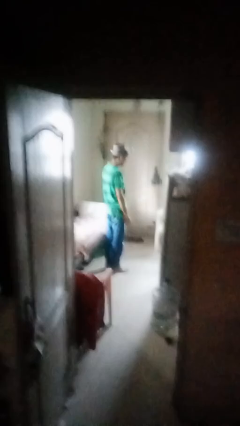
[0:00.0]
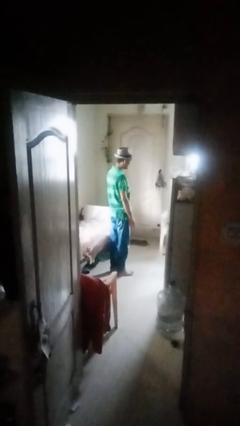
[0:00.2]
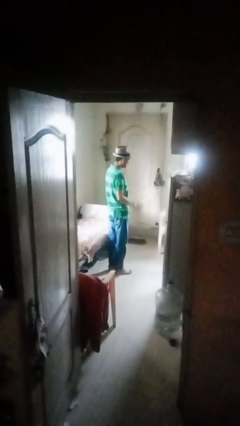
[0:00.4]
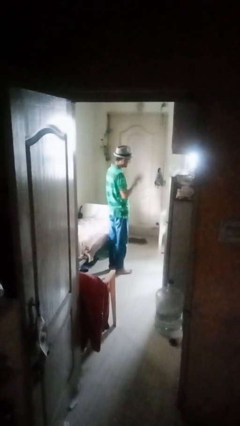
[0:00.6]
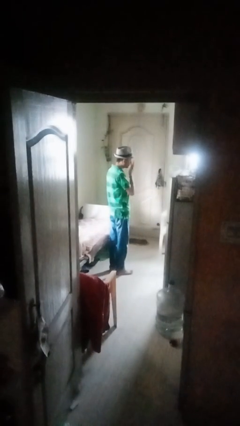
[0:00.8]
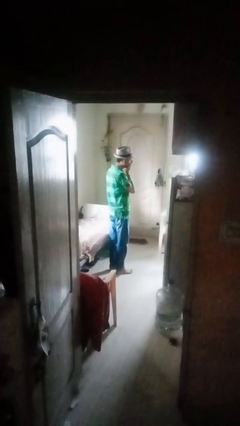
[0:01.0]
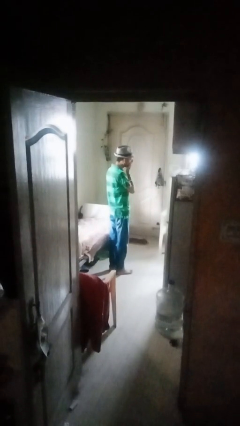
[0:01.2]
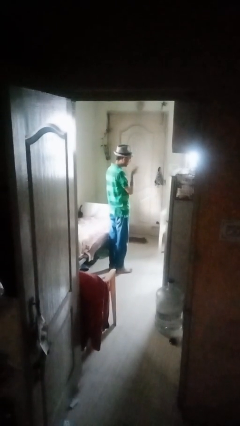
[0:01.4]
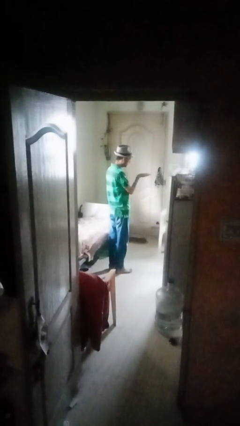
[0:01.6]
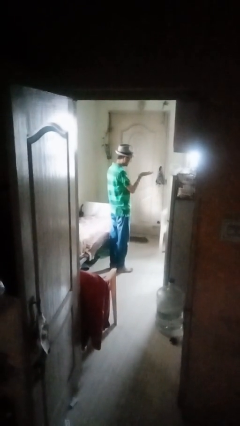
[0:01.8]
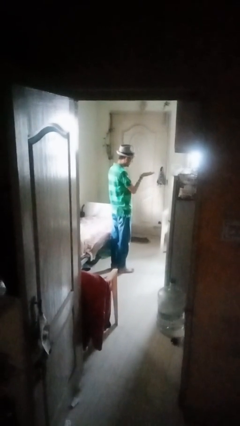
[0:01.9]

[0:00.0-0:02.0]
person gestures blow kiss

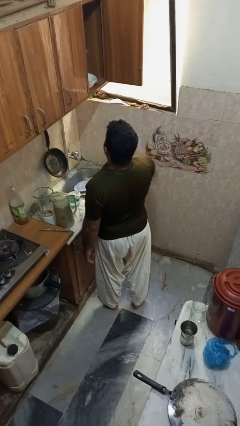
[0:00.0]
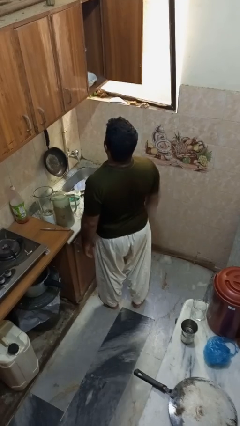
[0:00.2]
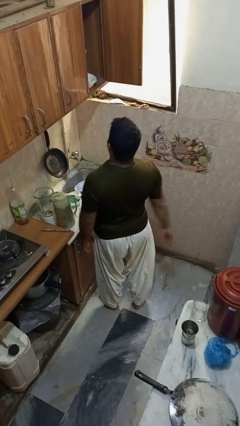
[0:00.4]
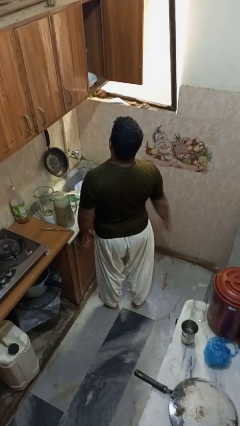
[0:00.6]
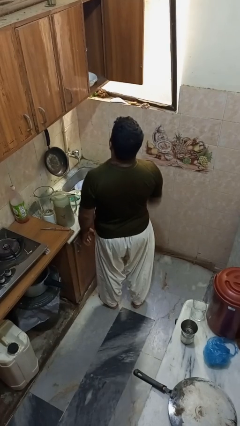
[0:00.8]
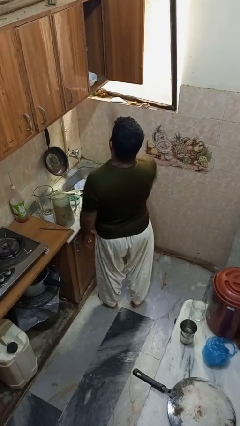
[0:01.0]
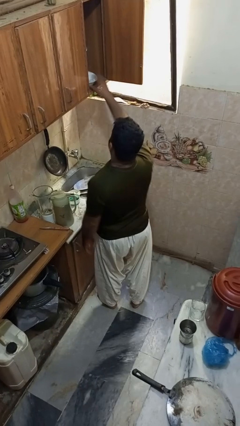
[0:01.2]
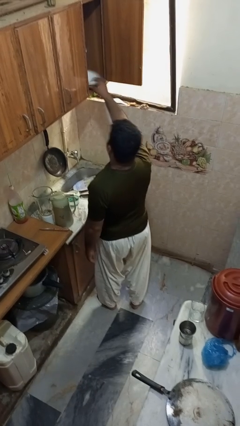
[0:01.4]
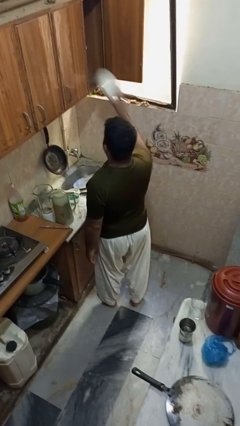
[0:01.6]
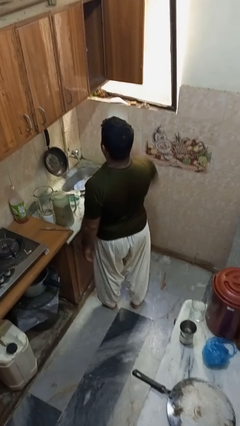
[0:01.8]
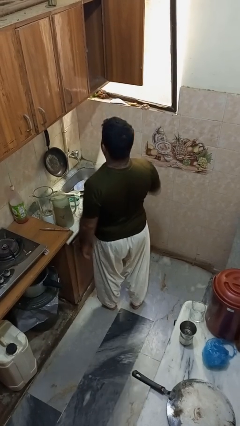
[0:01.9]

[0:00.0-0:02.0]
person takes object from cabinet

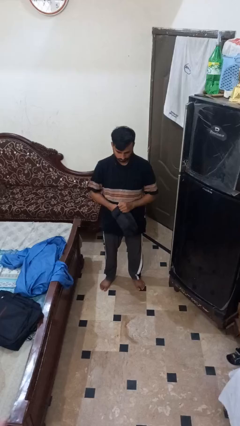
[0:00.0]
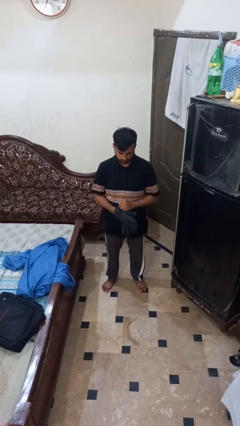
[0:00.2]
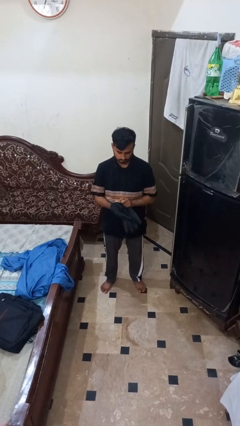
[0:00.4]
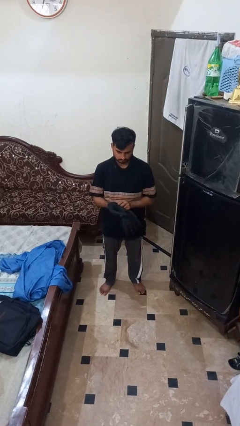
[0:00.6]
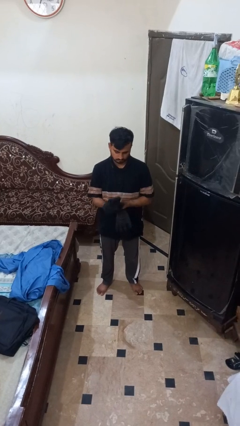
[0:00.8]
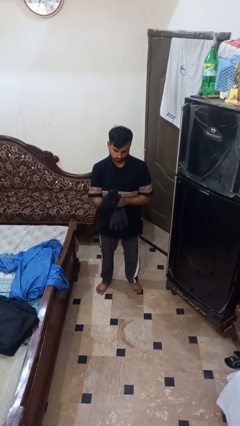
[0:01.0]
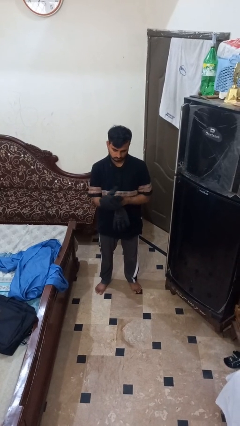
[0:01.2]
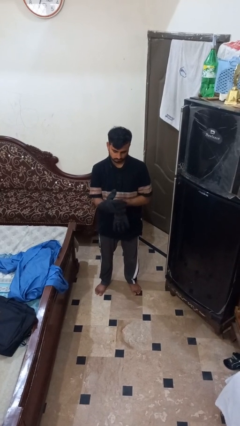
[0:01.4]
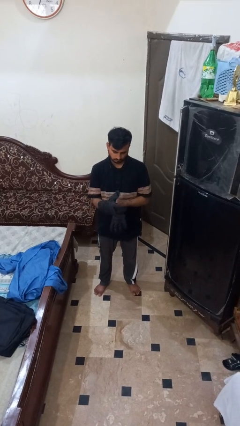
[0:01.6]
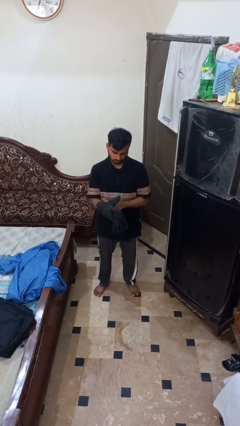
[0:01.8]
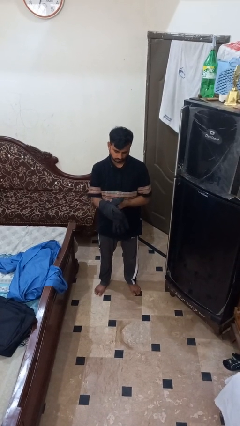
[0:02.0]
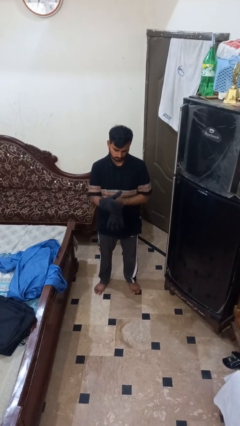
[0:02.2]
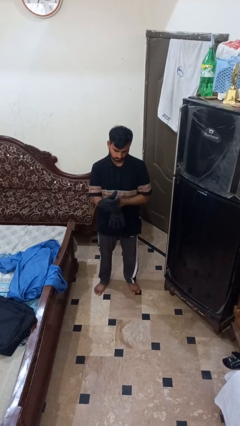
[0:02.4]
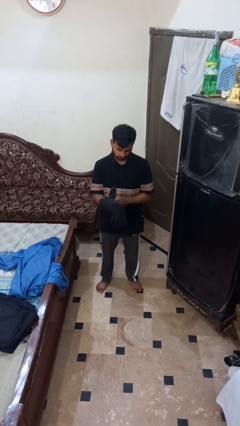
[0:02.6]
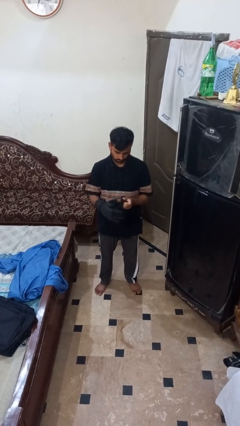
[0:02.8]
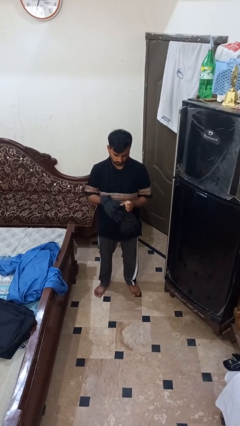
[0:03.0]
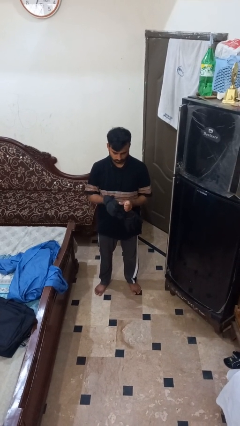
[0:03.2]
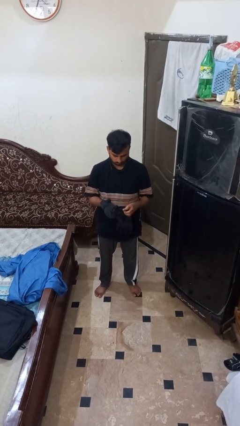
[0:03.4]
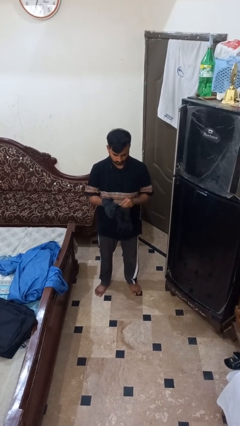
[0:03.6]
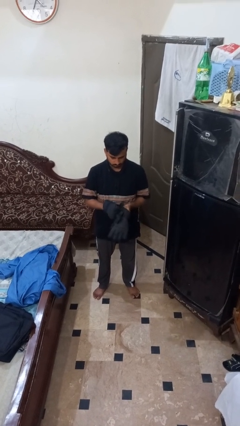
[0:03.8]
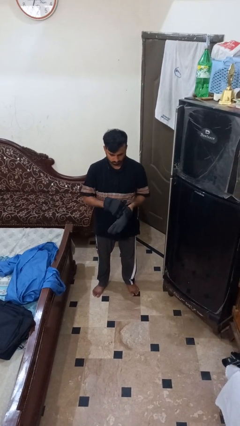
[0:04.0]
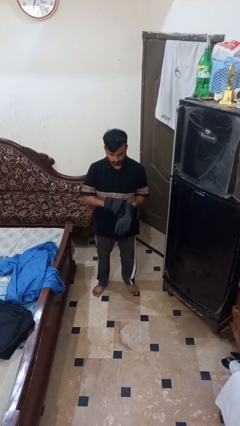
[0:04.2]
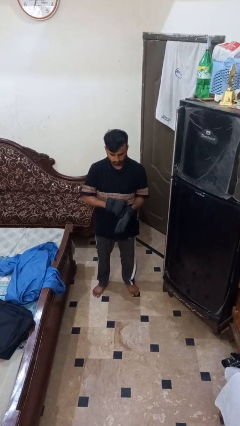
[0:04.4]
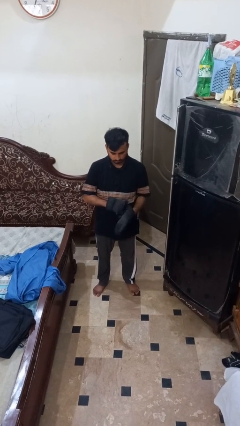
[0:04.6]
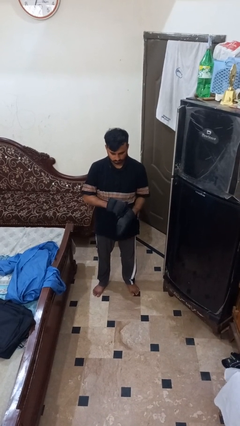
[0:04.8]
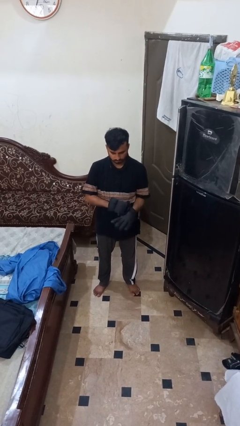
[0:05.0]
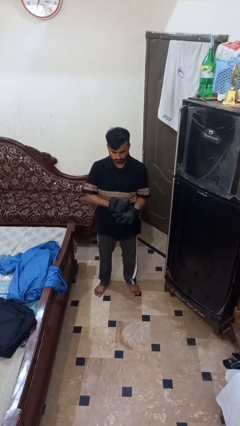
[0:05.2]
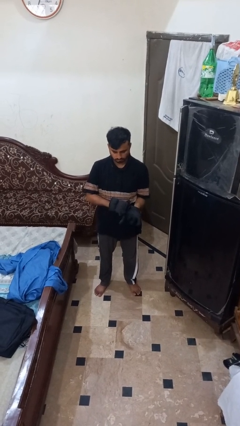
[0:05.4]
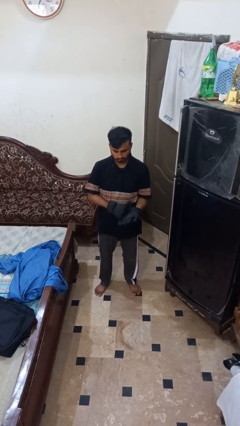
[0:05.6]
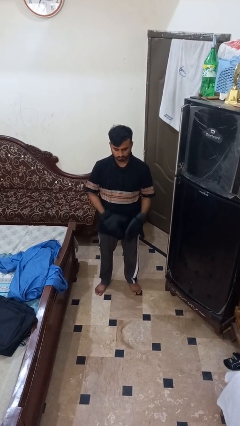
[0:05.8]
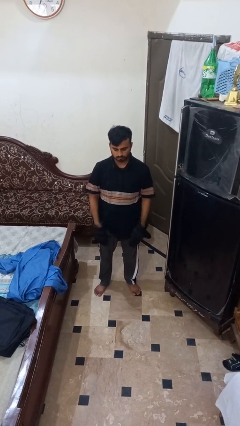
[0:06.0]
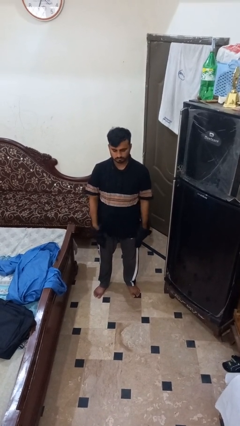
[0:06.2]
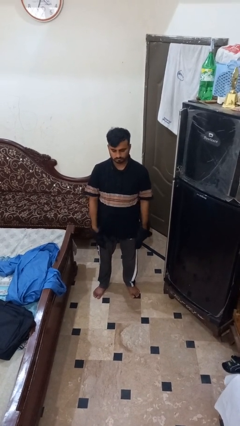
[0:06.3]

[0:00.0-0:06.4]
person puts on gloves

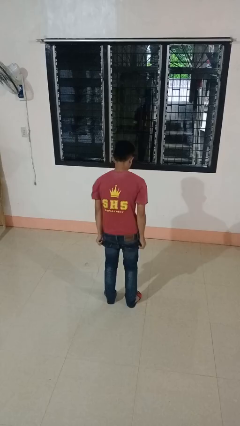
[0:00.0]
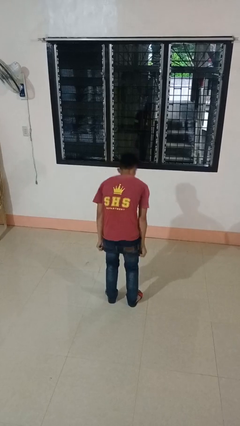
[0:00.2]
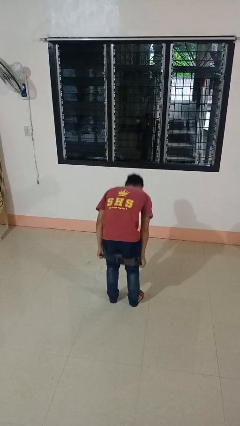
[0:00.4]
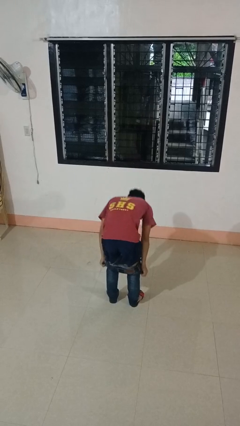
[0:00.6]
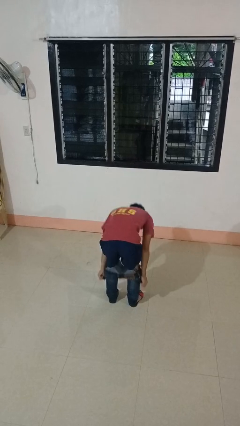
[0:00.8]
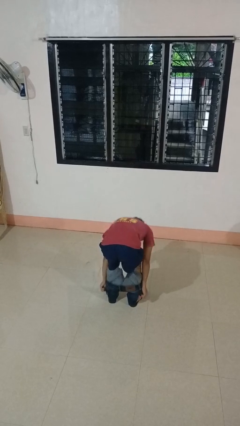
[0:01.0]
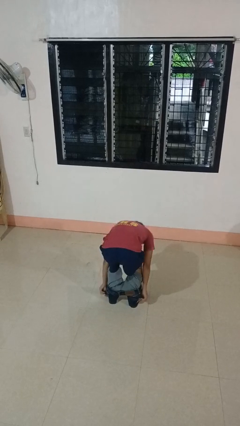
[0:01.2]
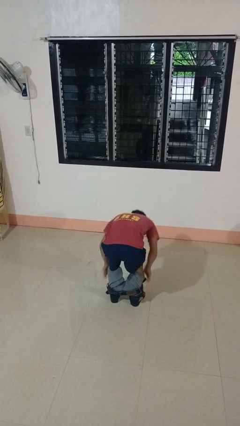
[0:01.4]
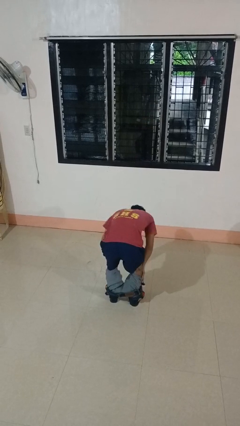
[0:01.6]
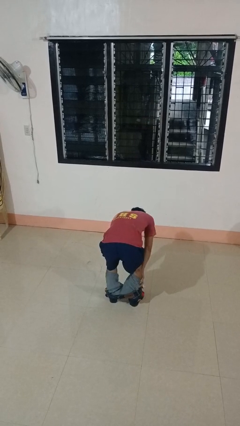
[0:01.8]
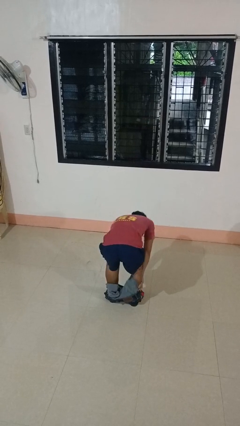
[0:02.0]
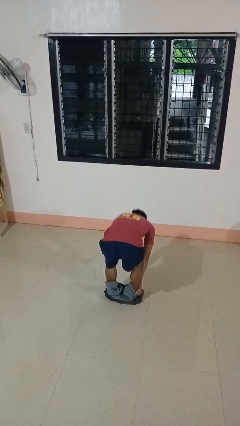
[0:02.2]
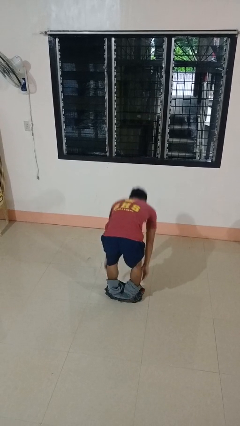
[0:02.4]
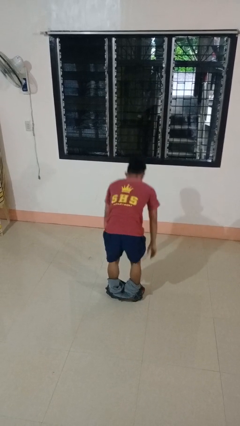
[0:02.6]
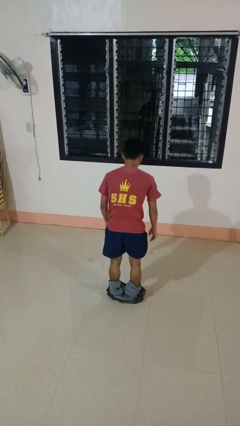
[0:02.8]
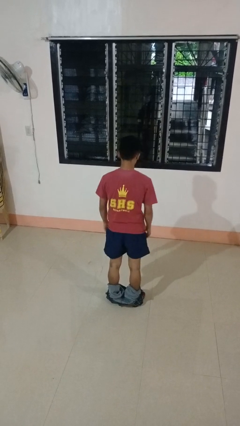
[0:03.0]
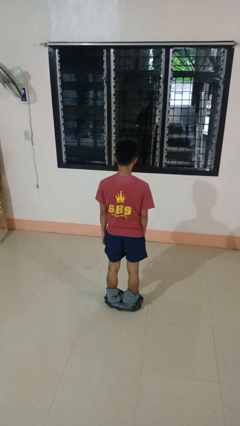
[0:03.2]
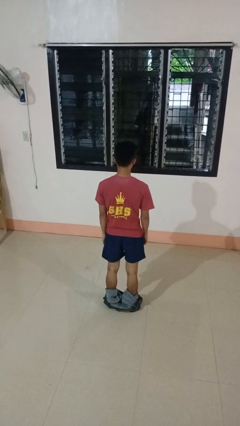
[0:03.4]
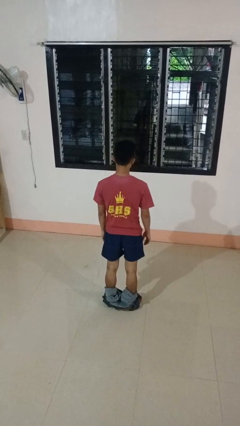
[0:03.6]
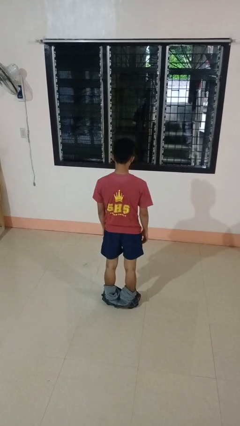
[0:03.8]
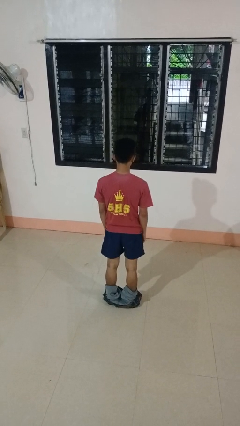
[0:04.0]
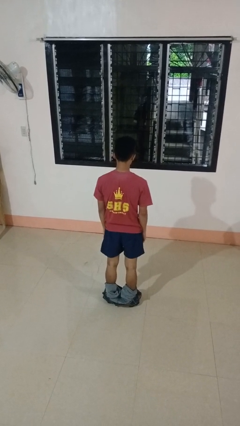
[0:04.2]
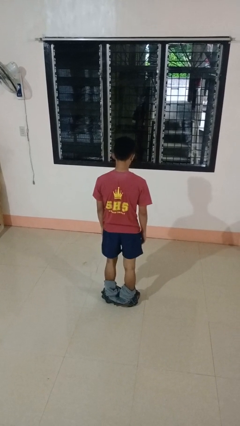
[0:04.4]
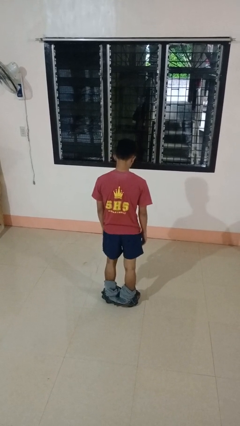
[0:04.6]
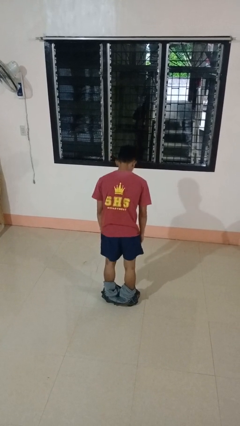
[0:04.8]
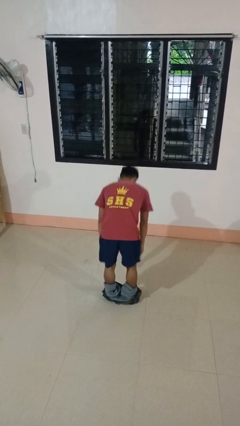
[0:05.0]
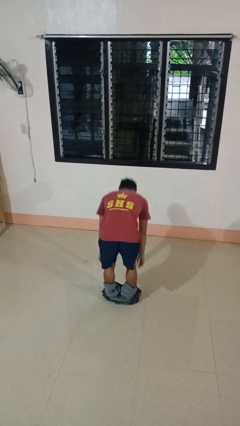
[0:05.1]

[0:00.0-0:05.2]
person takes off pants

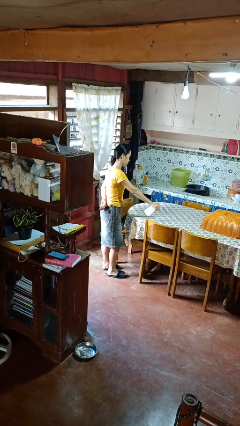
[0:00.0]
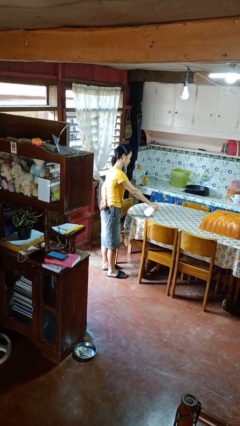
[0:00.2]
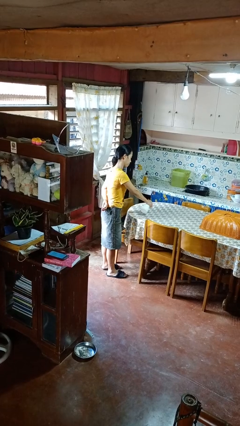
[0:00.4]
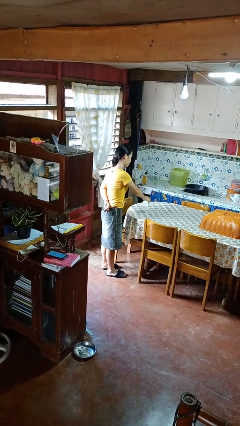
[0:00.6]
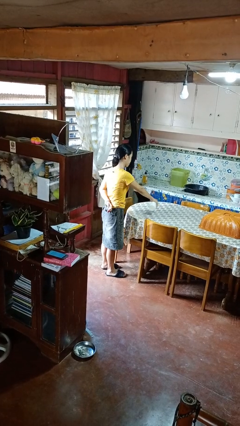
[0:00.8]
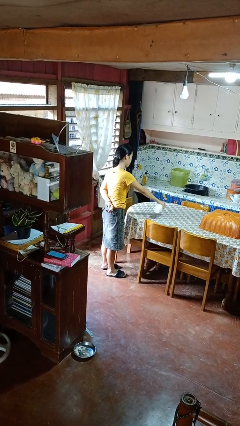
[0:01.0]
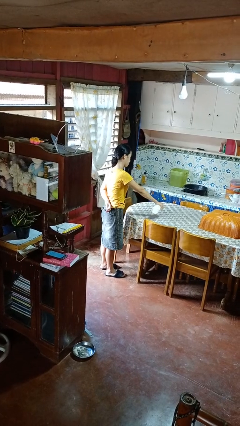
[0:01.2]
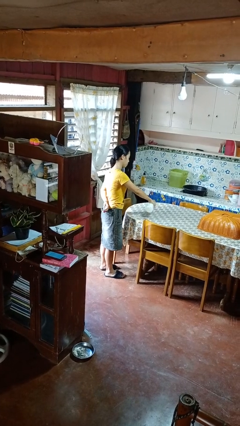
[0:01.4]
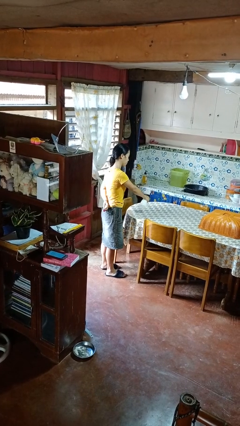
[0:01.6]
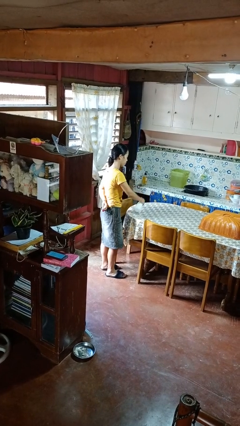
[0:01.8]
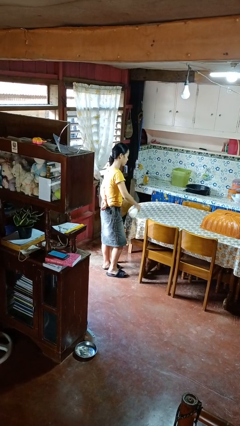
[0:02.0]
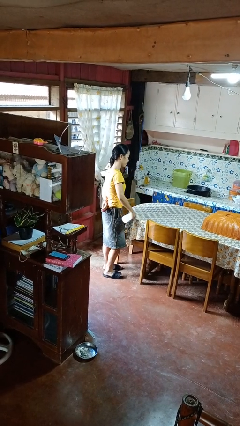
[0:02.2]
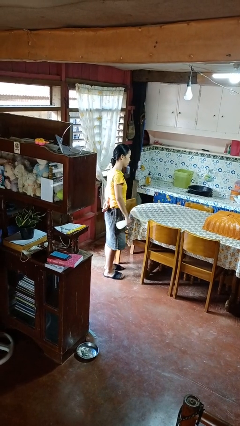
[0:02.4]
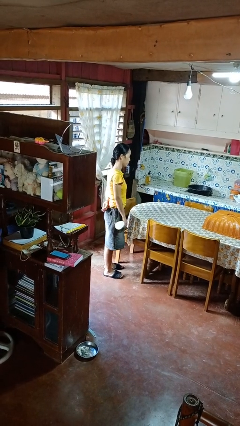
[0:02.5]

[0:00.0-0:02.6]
person sprays from bottle
